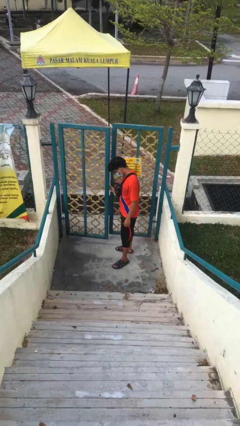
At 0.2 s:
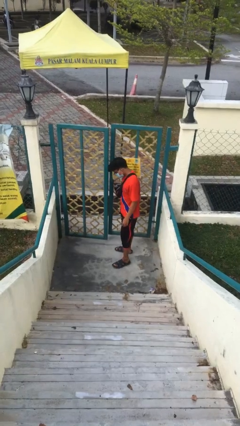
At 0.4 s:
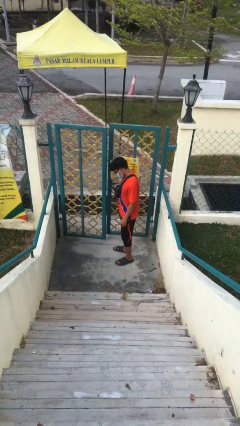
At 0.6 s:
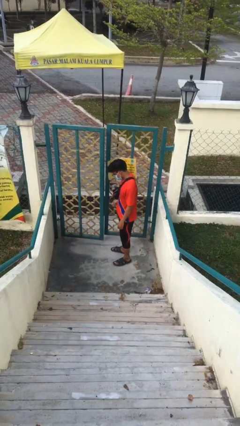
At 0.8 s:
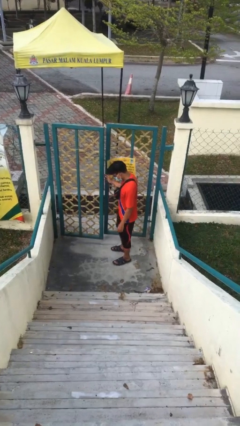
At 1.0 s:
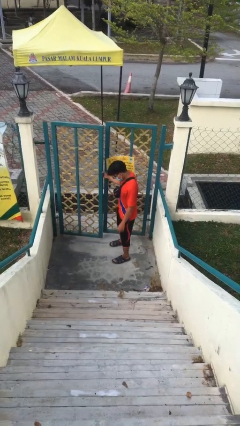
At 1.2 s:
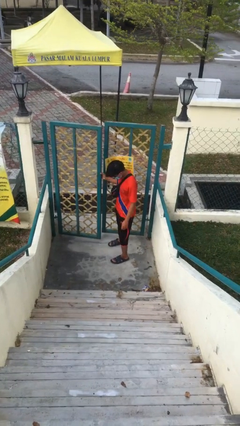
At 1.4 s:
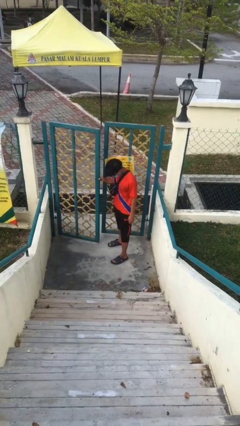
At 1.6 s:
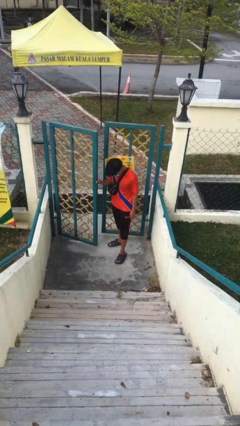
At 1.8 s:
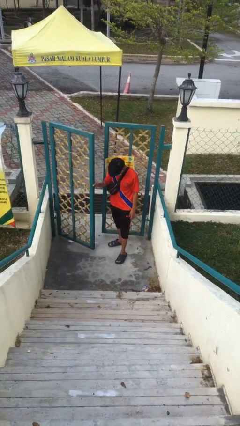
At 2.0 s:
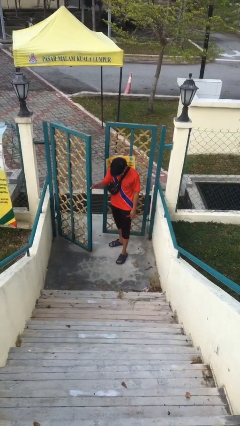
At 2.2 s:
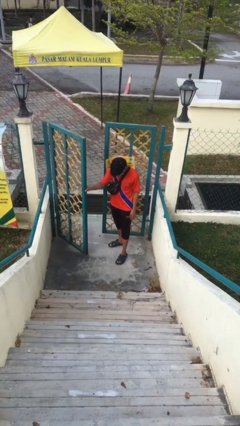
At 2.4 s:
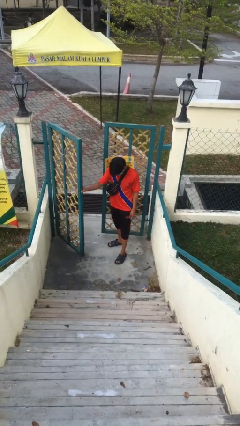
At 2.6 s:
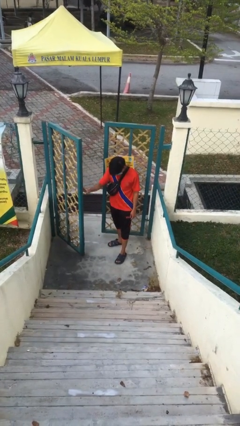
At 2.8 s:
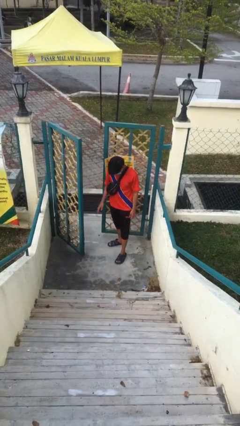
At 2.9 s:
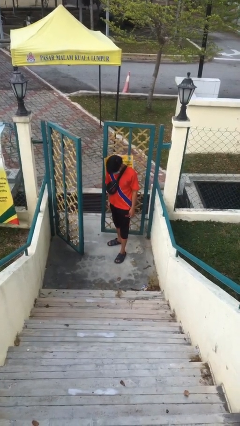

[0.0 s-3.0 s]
person opens facility door

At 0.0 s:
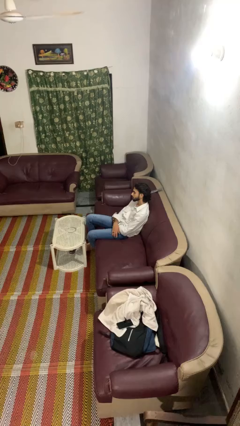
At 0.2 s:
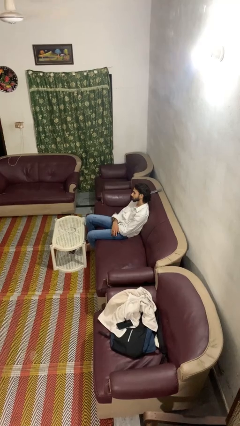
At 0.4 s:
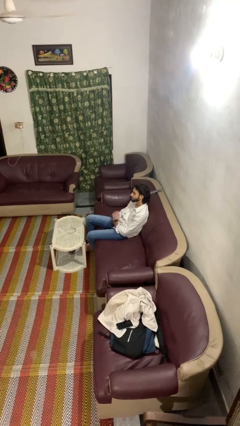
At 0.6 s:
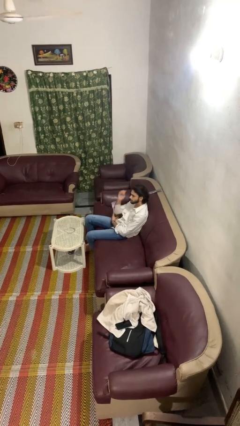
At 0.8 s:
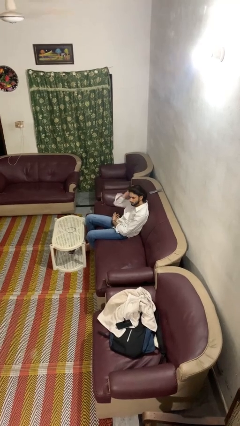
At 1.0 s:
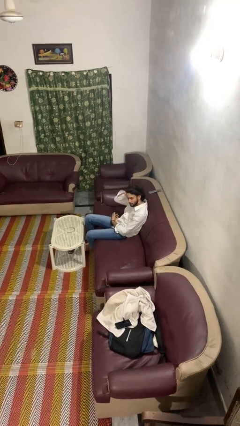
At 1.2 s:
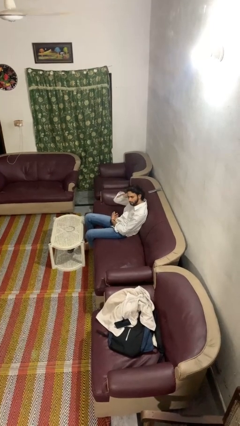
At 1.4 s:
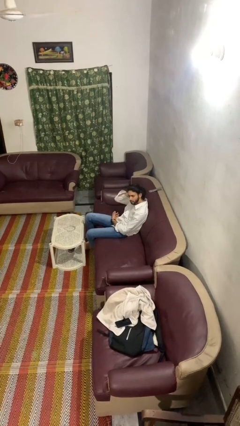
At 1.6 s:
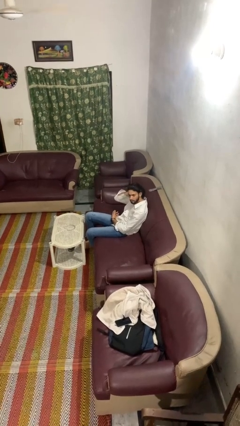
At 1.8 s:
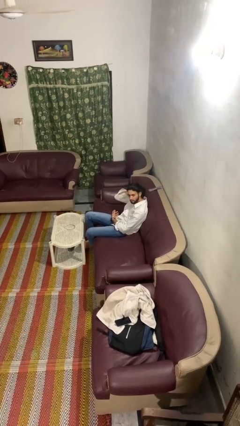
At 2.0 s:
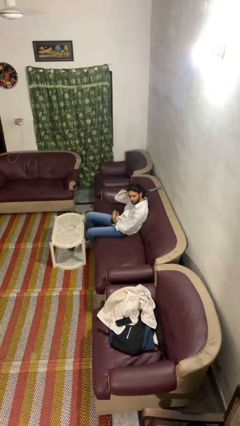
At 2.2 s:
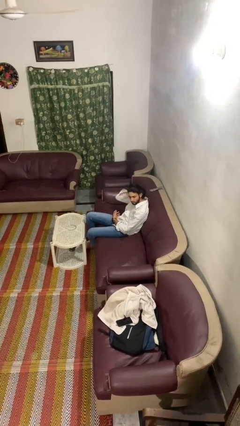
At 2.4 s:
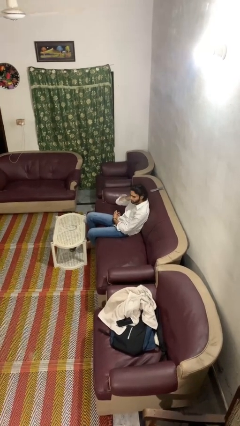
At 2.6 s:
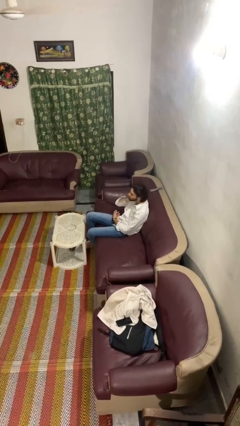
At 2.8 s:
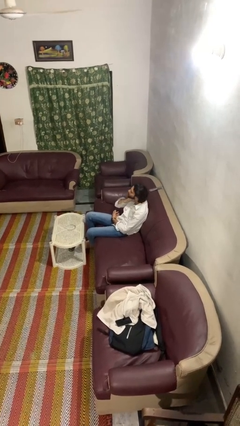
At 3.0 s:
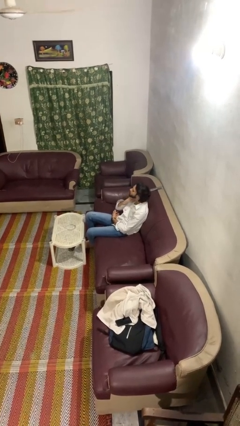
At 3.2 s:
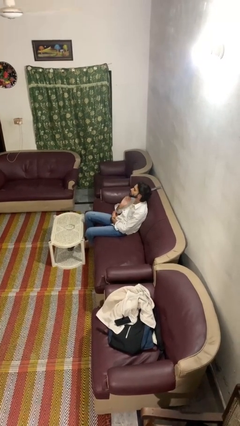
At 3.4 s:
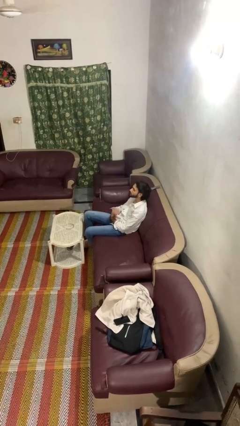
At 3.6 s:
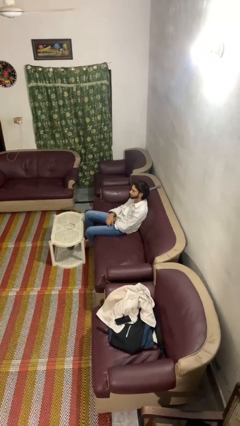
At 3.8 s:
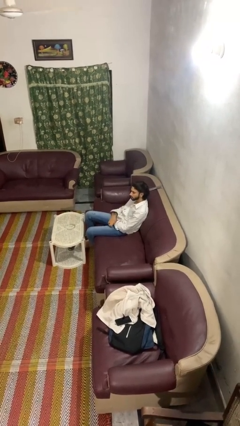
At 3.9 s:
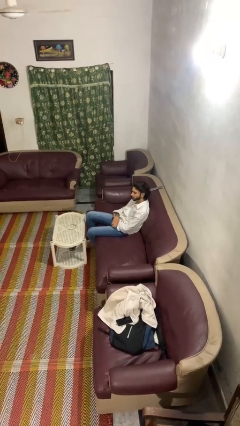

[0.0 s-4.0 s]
person strokes hair

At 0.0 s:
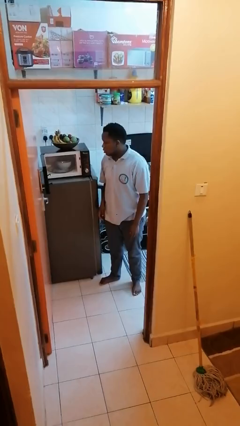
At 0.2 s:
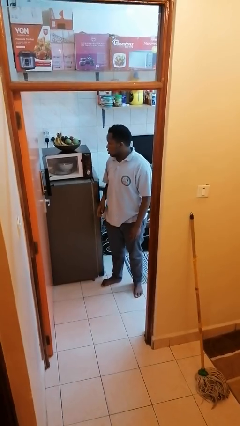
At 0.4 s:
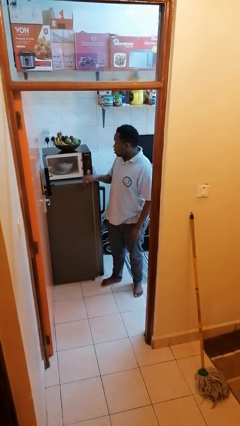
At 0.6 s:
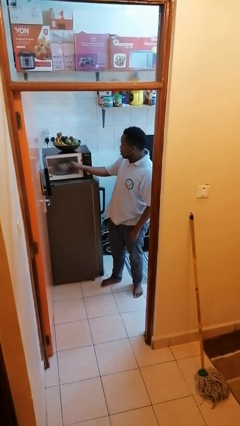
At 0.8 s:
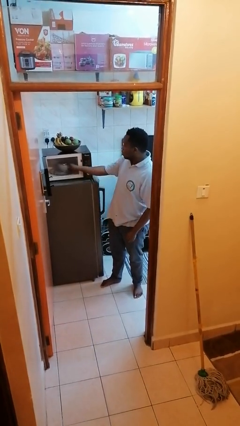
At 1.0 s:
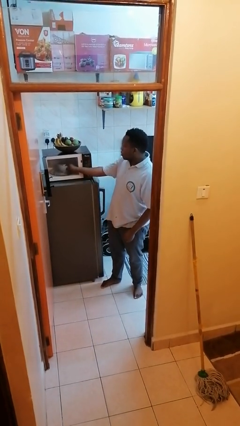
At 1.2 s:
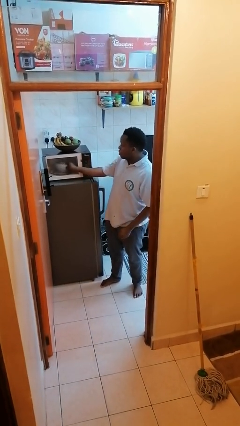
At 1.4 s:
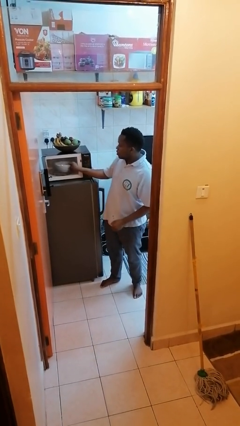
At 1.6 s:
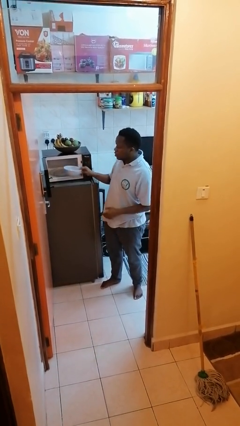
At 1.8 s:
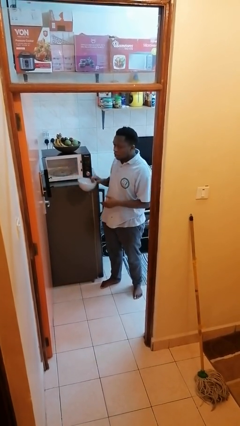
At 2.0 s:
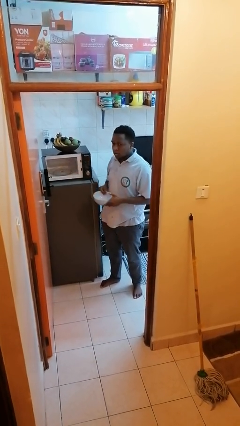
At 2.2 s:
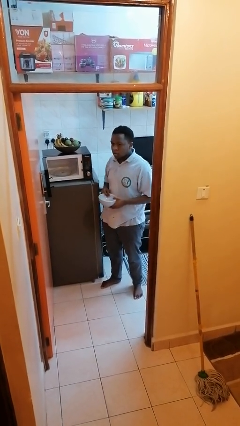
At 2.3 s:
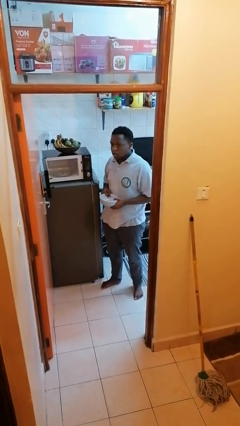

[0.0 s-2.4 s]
person takes object from microwave

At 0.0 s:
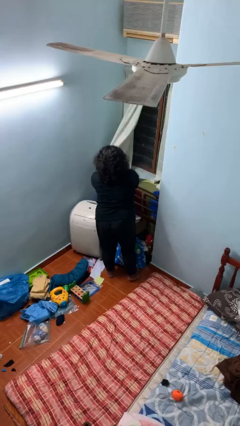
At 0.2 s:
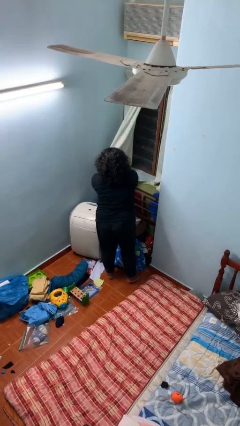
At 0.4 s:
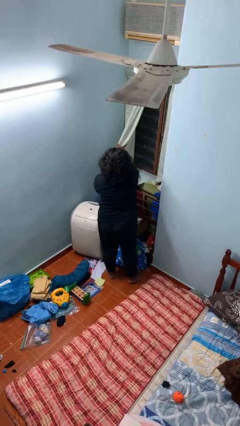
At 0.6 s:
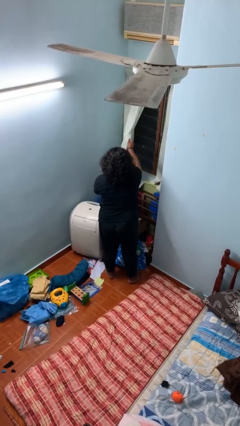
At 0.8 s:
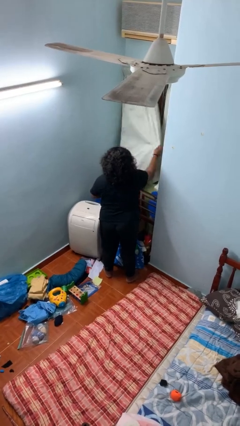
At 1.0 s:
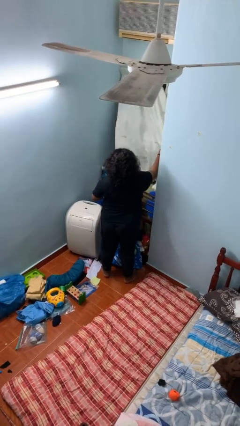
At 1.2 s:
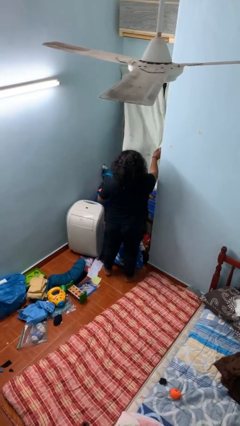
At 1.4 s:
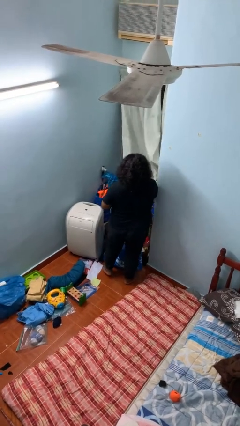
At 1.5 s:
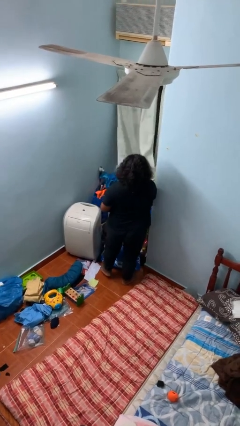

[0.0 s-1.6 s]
person closes curtains

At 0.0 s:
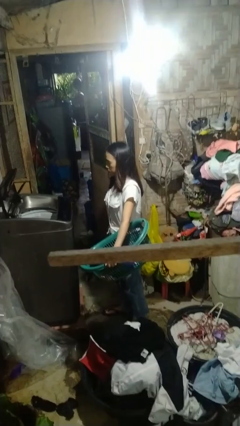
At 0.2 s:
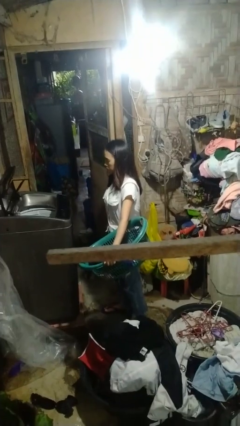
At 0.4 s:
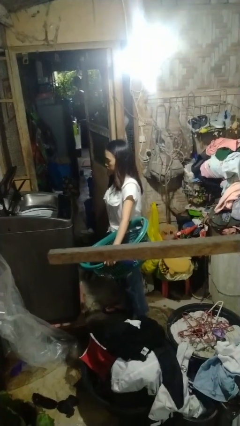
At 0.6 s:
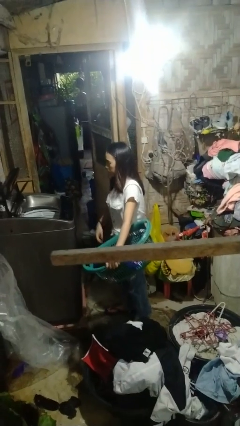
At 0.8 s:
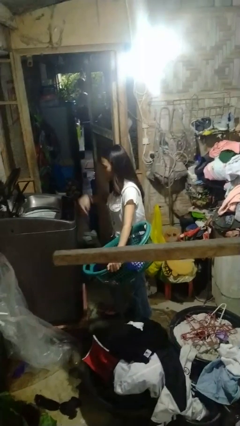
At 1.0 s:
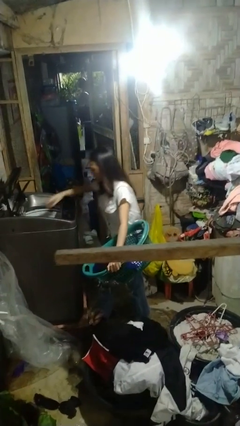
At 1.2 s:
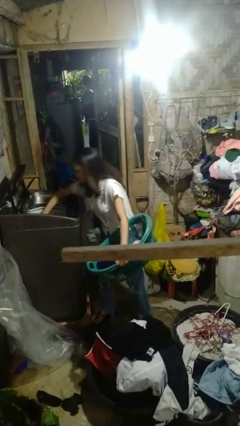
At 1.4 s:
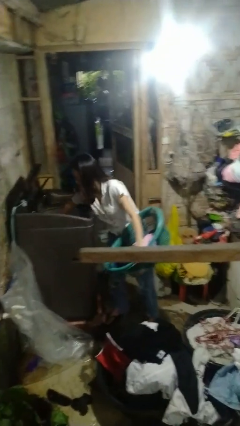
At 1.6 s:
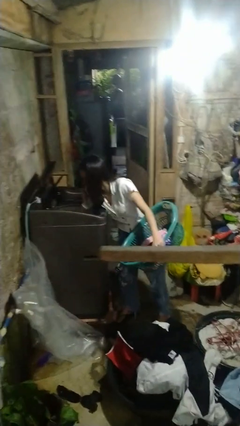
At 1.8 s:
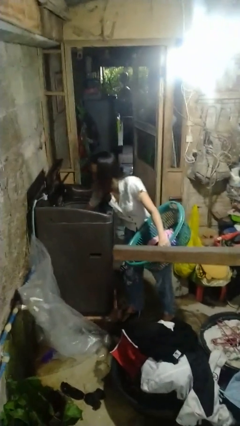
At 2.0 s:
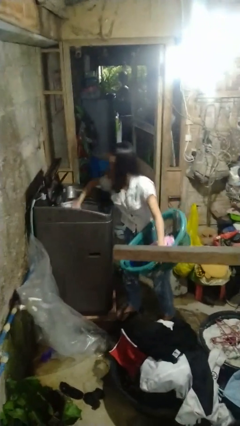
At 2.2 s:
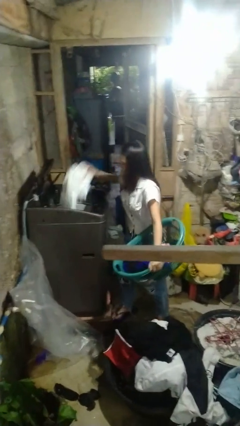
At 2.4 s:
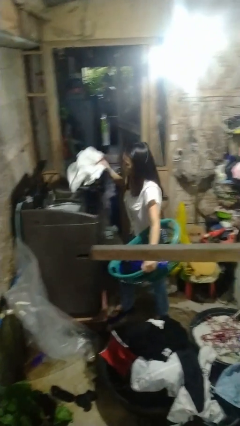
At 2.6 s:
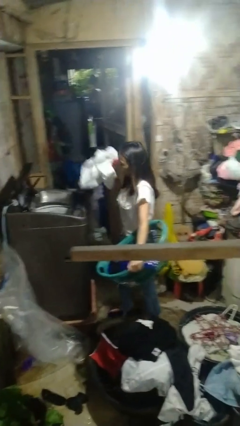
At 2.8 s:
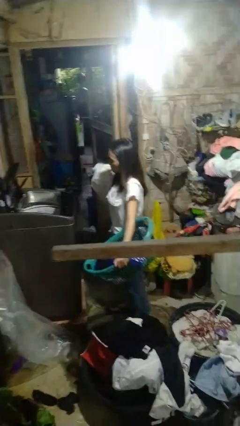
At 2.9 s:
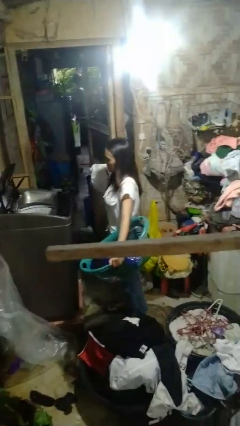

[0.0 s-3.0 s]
person unloads dryer

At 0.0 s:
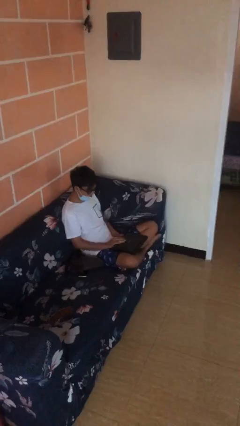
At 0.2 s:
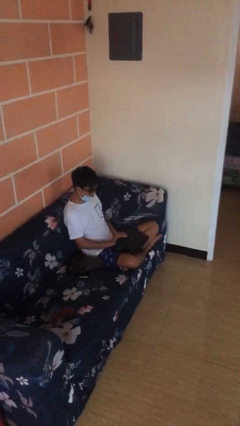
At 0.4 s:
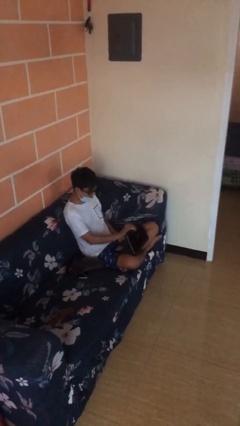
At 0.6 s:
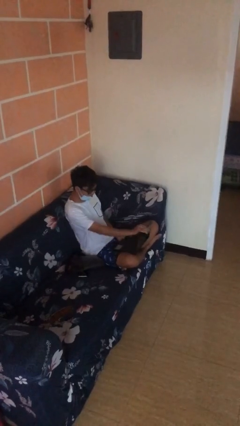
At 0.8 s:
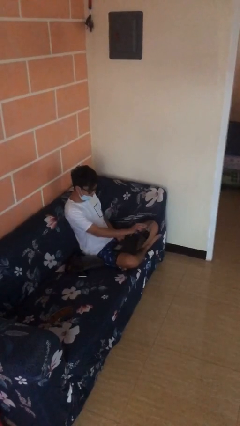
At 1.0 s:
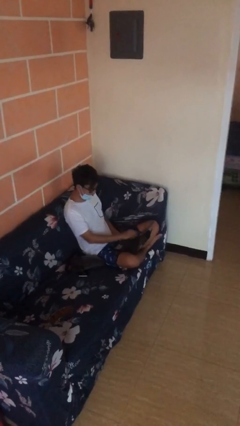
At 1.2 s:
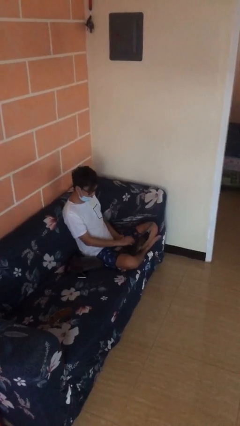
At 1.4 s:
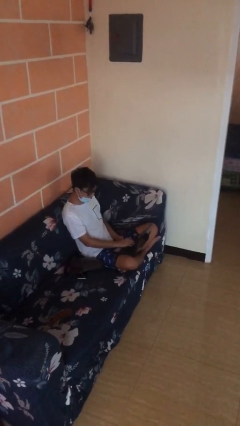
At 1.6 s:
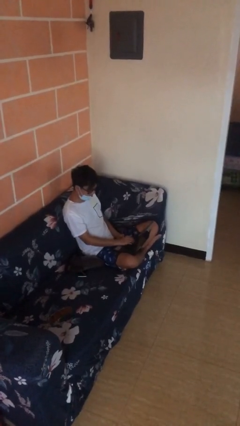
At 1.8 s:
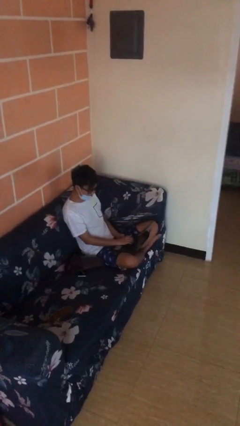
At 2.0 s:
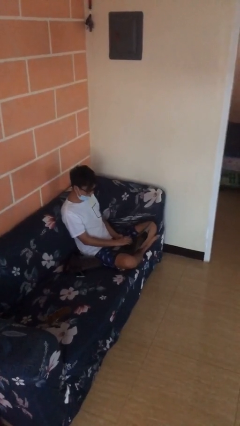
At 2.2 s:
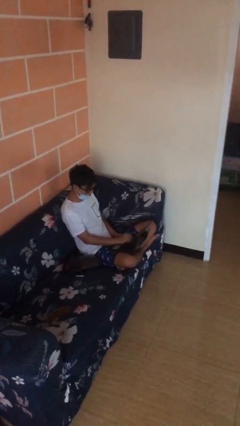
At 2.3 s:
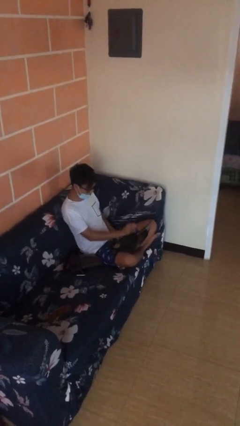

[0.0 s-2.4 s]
person interacts with laptop

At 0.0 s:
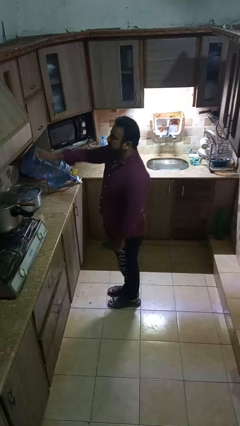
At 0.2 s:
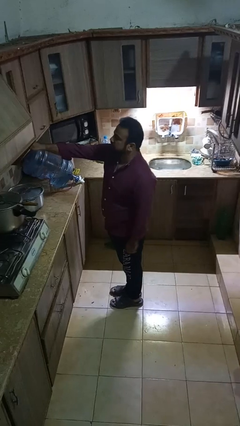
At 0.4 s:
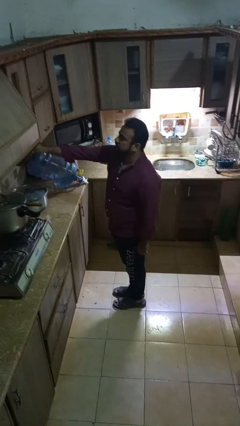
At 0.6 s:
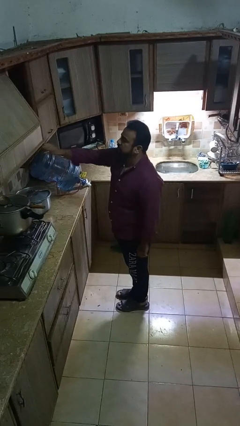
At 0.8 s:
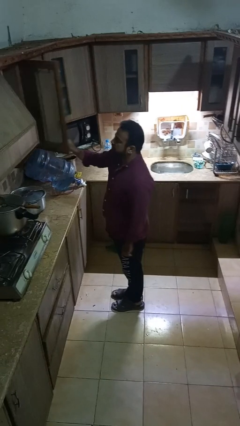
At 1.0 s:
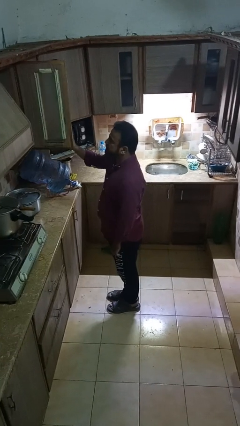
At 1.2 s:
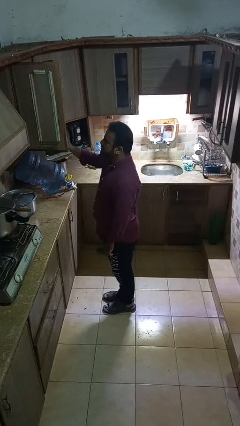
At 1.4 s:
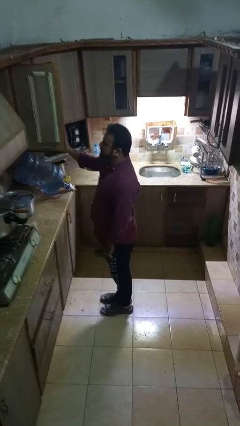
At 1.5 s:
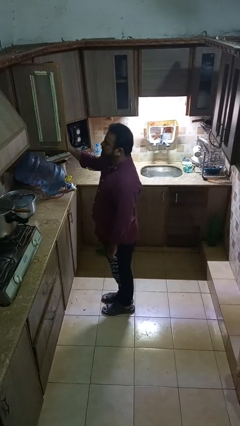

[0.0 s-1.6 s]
person opens cabinet
